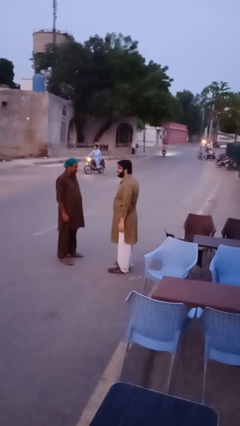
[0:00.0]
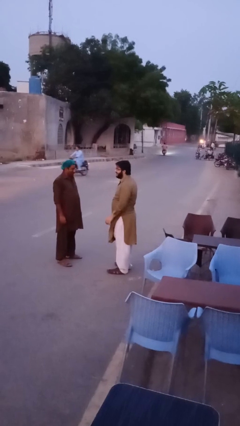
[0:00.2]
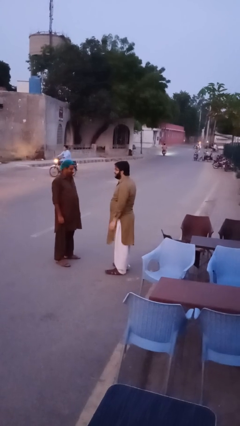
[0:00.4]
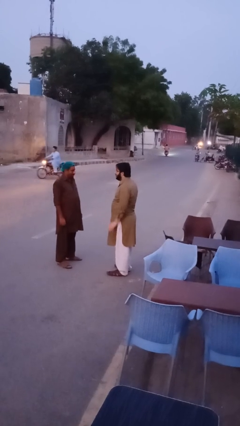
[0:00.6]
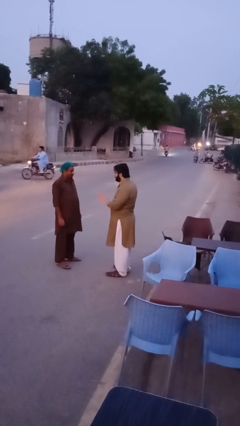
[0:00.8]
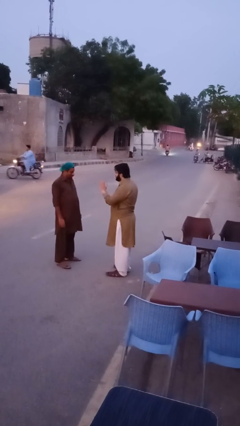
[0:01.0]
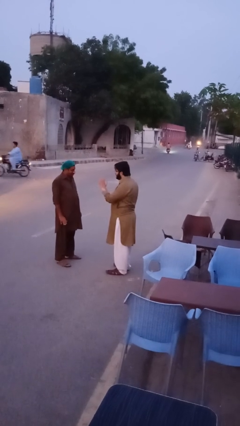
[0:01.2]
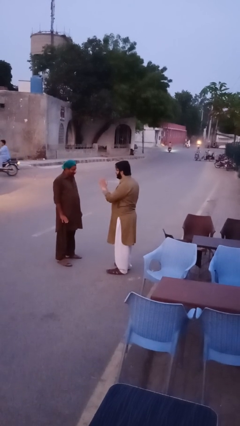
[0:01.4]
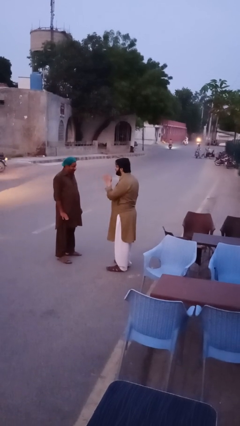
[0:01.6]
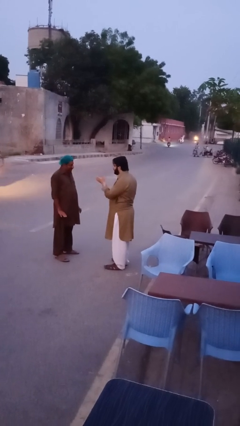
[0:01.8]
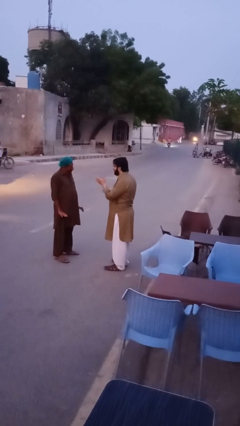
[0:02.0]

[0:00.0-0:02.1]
person talks to person

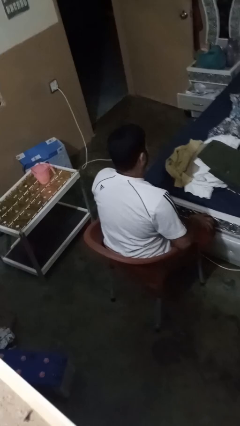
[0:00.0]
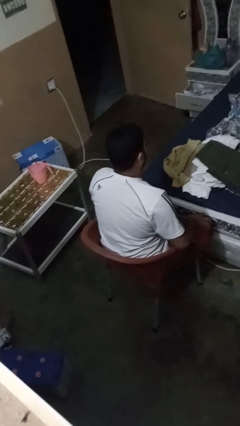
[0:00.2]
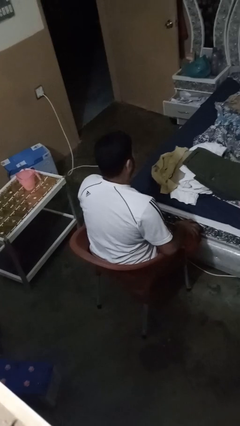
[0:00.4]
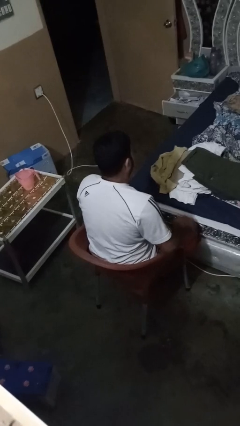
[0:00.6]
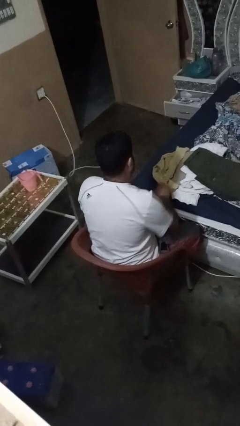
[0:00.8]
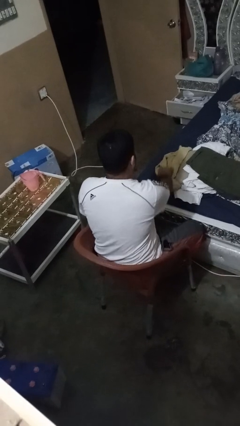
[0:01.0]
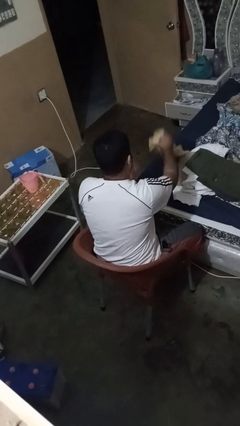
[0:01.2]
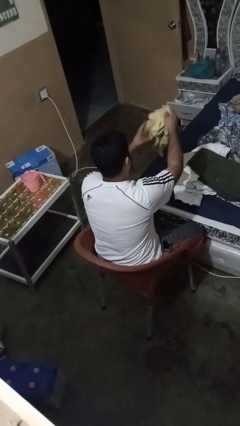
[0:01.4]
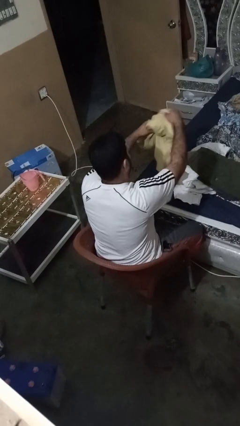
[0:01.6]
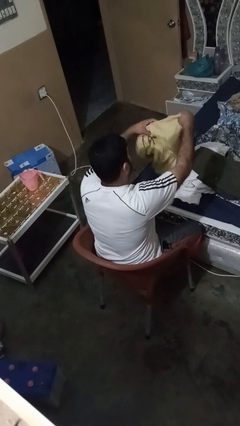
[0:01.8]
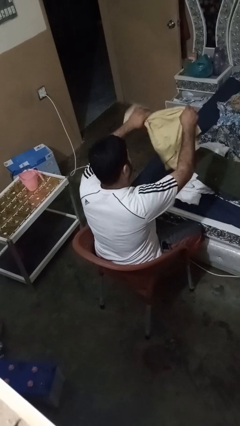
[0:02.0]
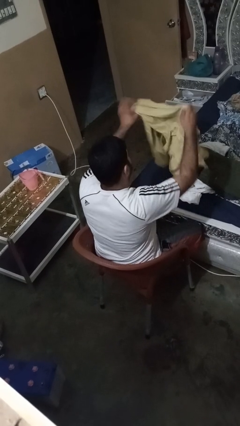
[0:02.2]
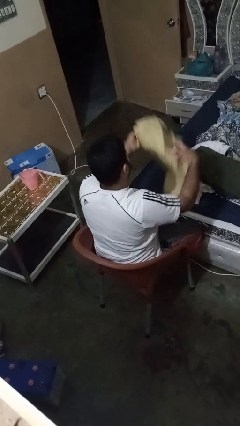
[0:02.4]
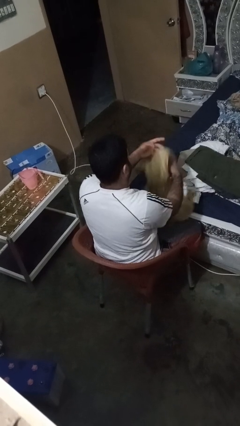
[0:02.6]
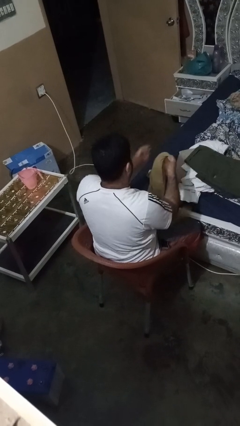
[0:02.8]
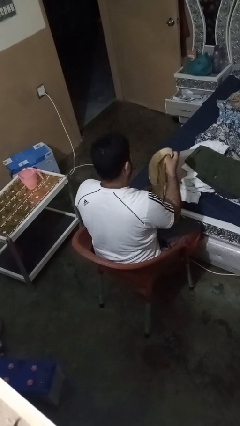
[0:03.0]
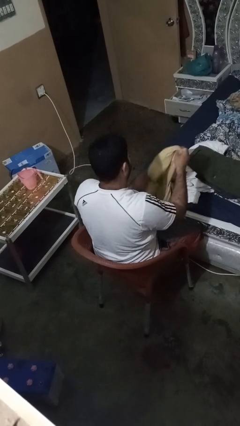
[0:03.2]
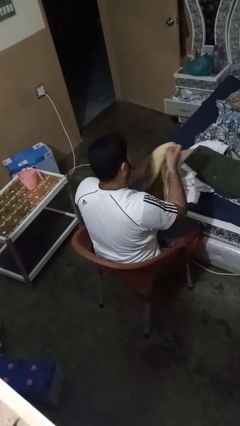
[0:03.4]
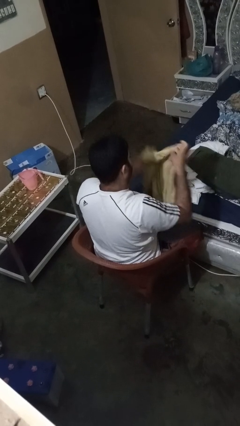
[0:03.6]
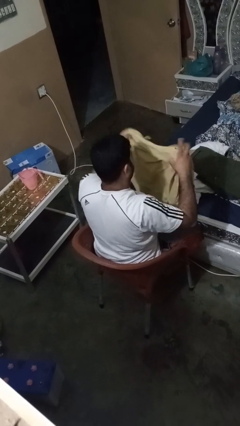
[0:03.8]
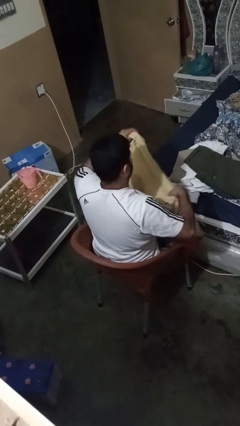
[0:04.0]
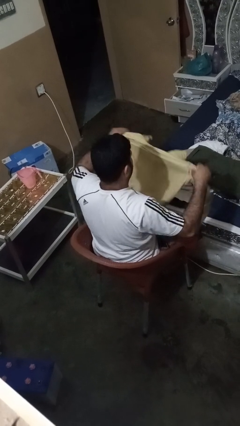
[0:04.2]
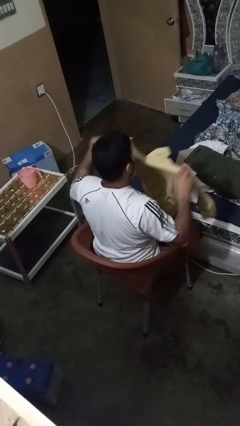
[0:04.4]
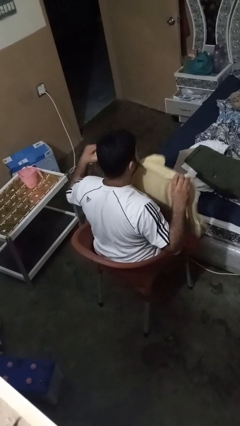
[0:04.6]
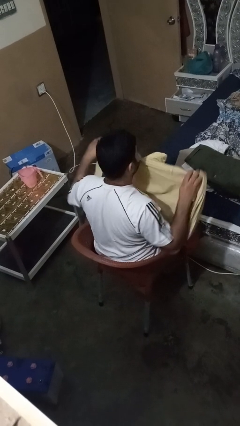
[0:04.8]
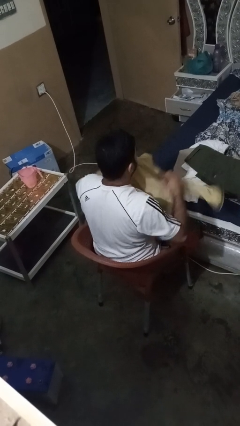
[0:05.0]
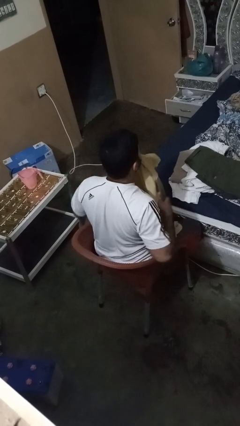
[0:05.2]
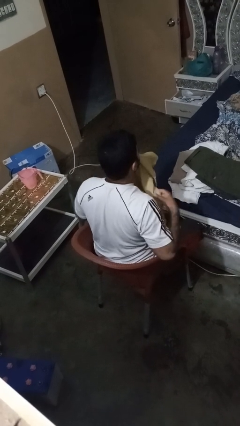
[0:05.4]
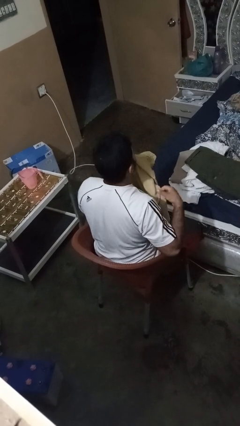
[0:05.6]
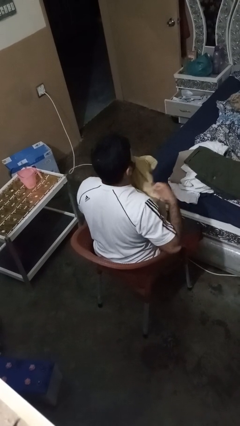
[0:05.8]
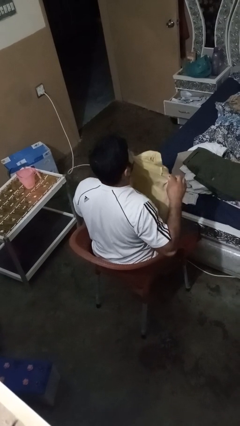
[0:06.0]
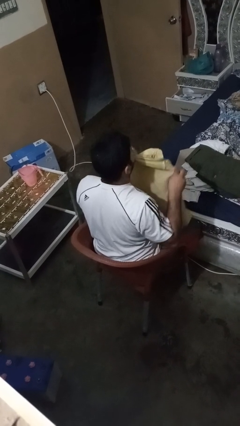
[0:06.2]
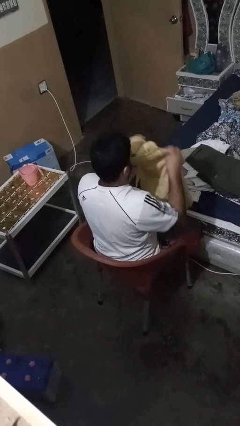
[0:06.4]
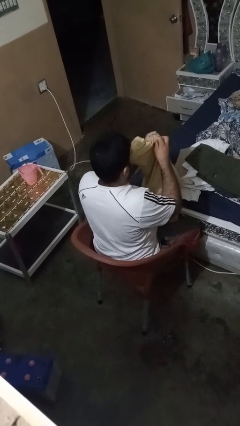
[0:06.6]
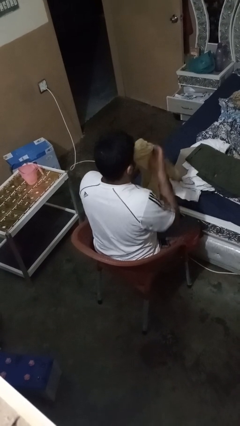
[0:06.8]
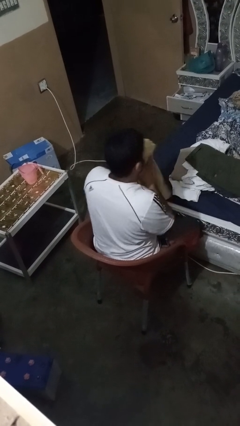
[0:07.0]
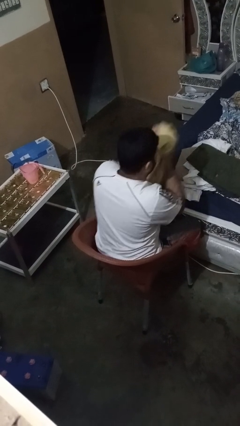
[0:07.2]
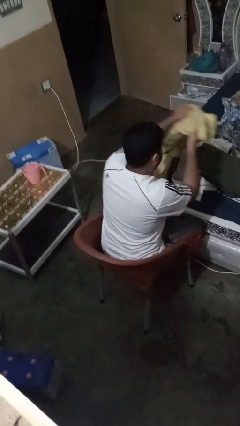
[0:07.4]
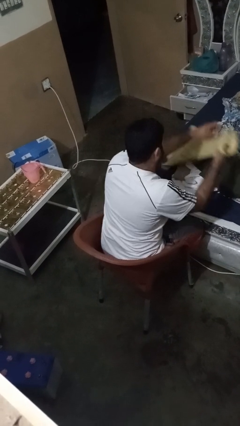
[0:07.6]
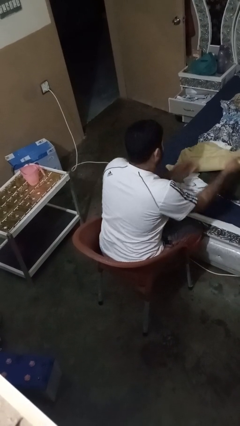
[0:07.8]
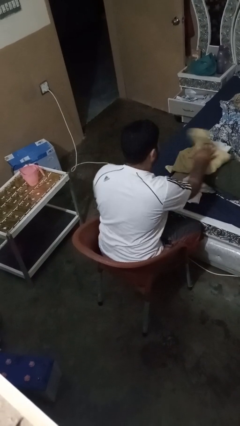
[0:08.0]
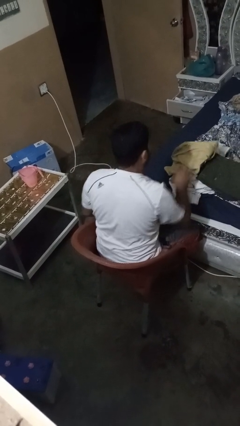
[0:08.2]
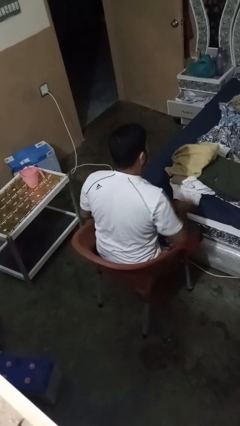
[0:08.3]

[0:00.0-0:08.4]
person folds shirt

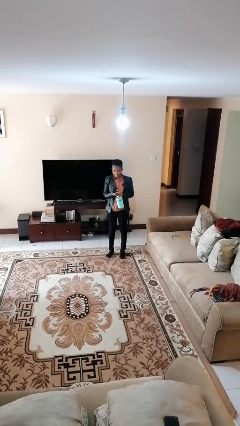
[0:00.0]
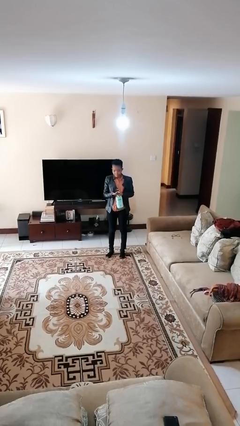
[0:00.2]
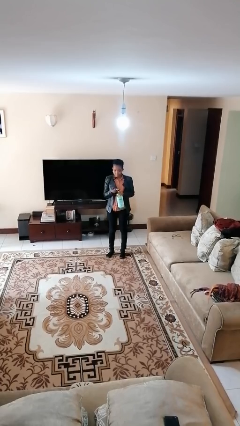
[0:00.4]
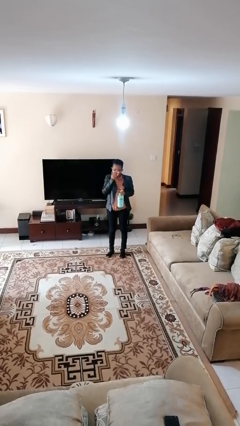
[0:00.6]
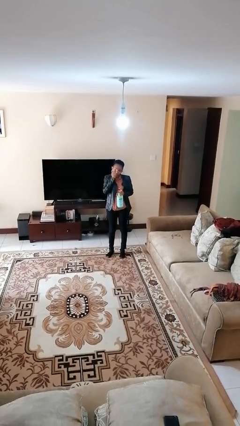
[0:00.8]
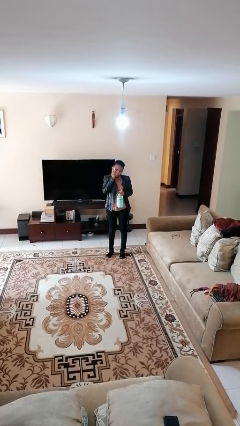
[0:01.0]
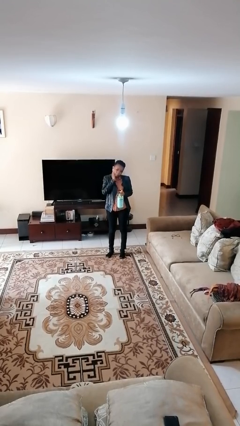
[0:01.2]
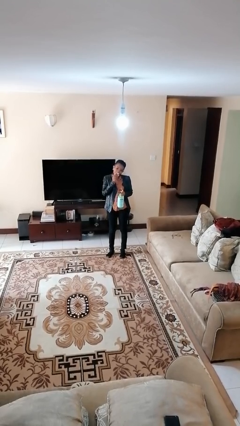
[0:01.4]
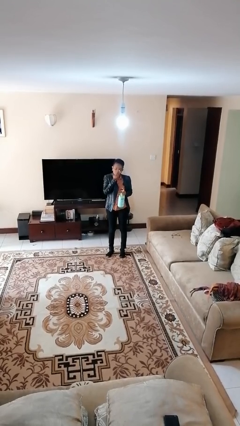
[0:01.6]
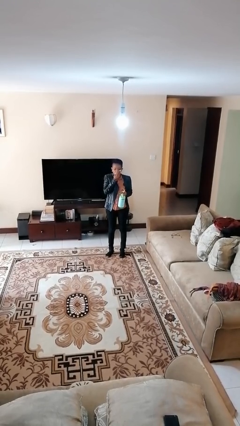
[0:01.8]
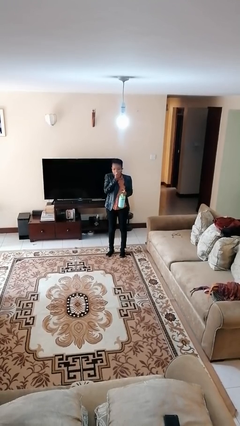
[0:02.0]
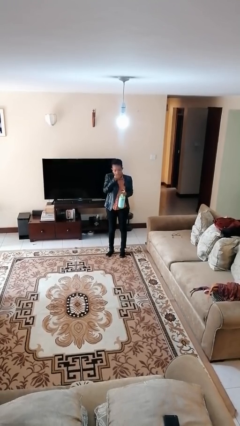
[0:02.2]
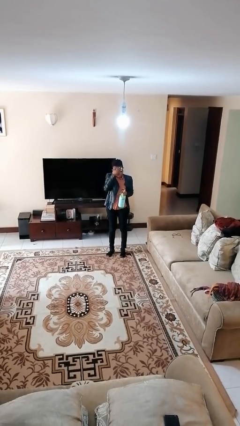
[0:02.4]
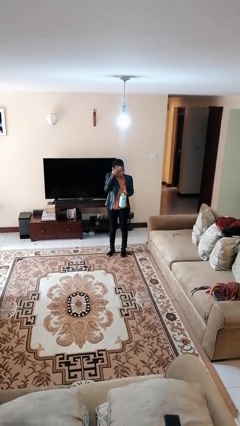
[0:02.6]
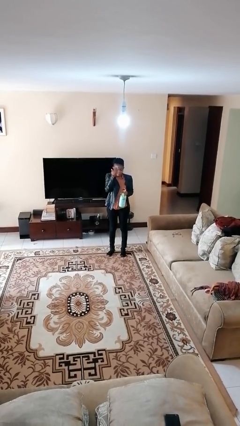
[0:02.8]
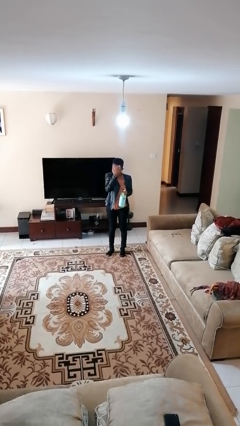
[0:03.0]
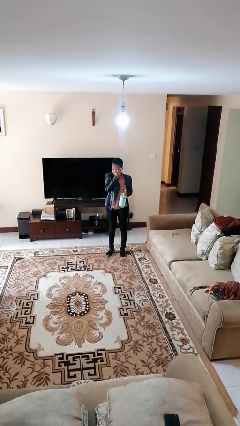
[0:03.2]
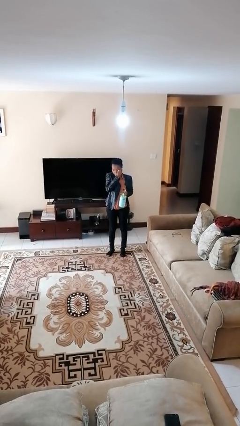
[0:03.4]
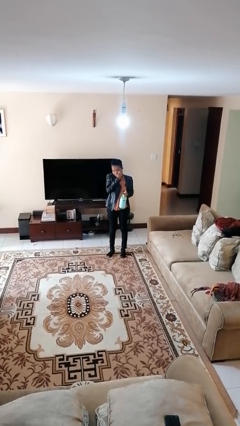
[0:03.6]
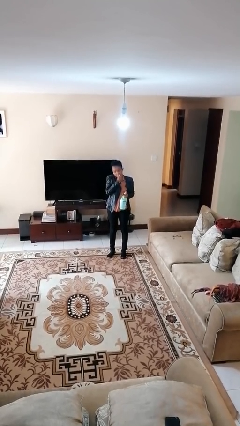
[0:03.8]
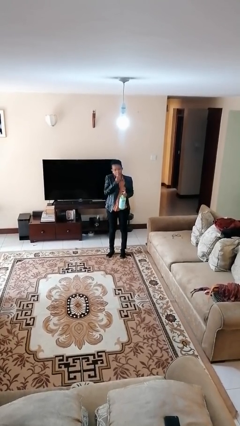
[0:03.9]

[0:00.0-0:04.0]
person applies facial moisturizer

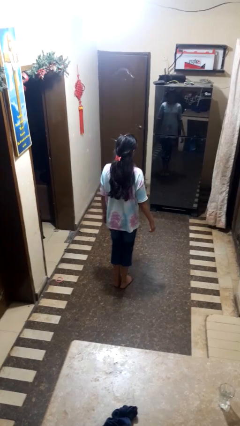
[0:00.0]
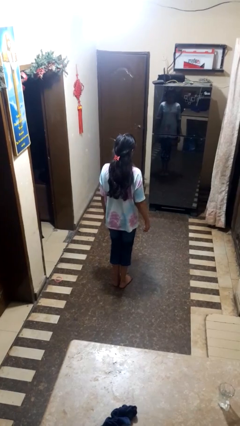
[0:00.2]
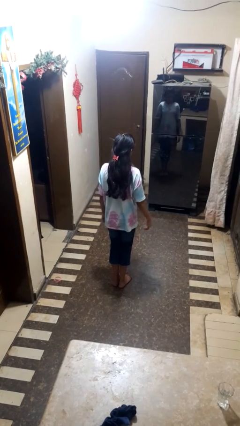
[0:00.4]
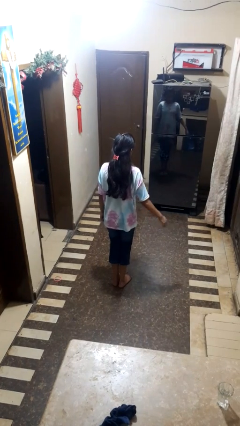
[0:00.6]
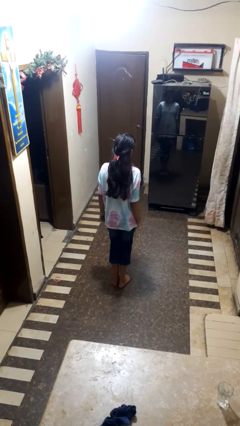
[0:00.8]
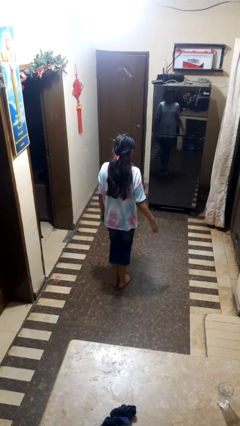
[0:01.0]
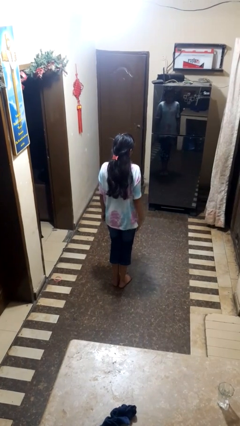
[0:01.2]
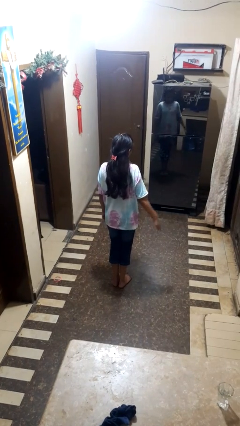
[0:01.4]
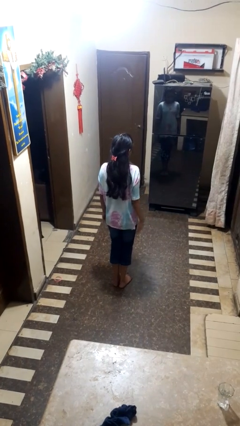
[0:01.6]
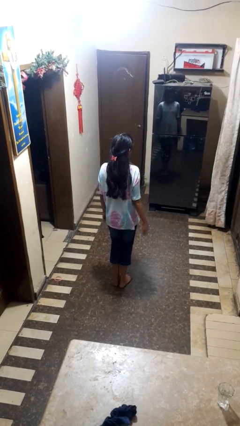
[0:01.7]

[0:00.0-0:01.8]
person slaps hands on thighs

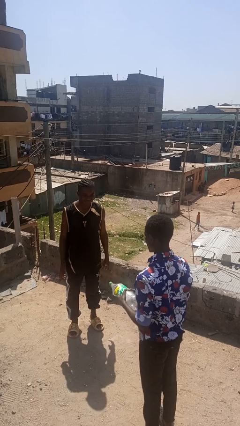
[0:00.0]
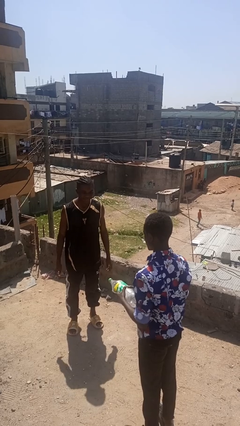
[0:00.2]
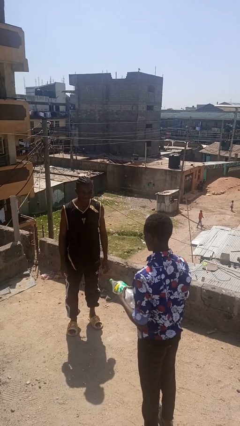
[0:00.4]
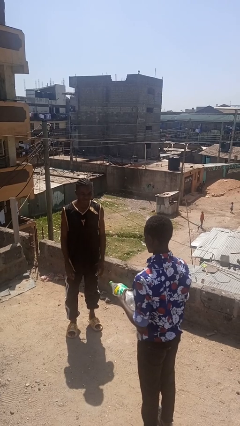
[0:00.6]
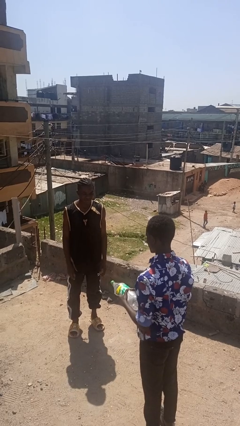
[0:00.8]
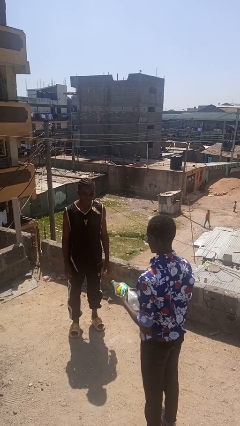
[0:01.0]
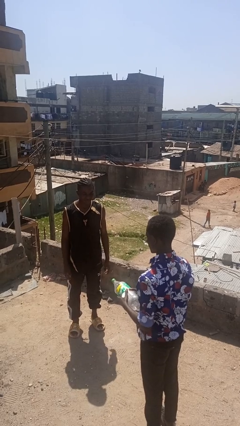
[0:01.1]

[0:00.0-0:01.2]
person catches object from person

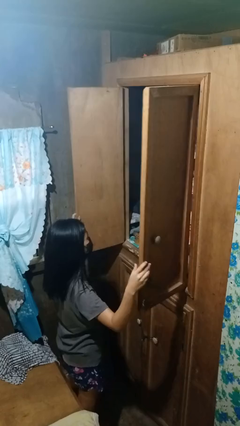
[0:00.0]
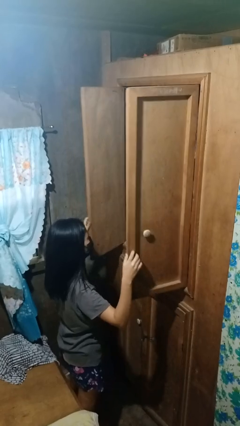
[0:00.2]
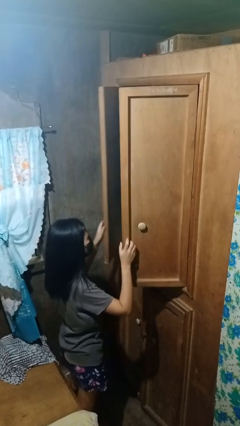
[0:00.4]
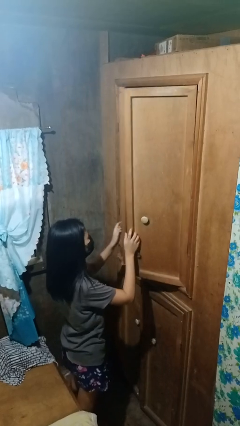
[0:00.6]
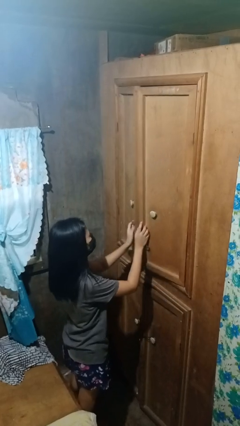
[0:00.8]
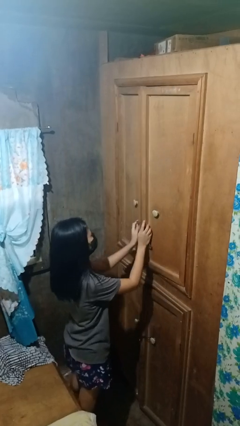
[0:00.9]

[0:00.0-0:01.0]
person closes closet door
